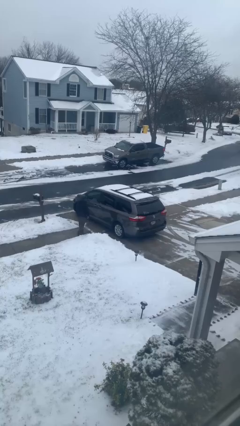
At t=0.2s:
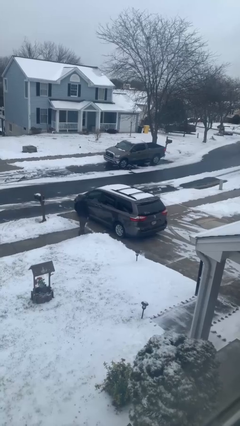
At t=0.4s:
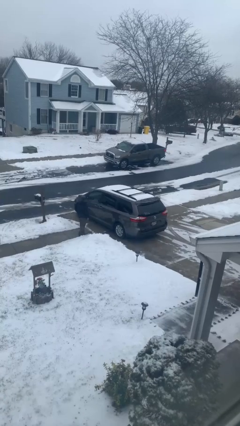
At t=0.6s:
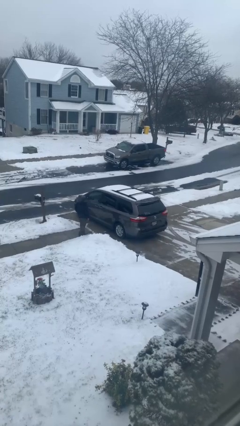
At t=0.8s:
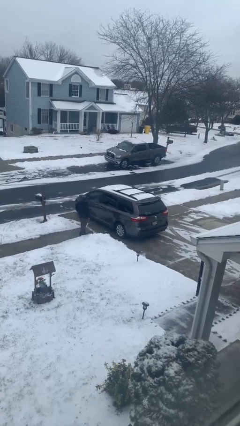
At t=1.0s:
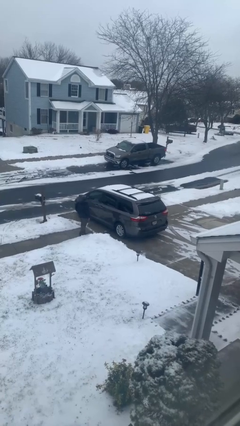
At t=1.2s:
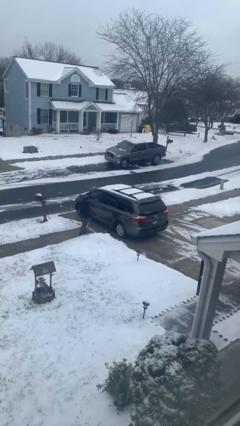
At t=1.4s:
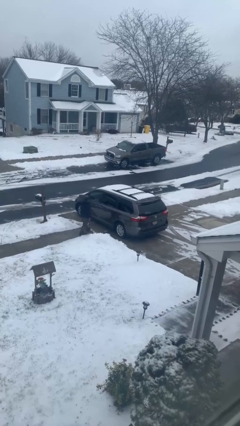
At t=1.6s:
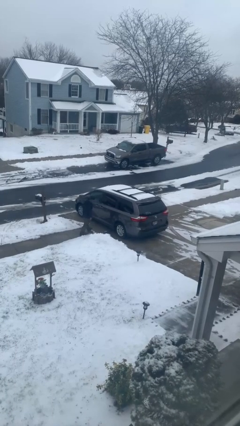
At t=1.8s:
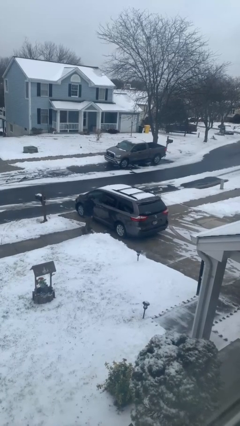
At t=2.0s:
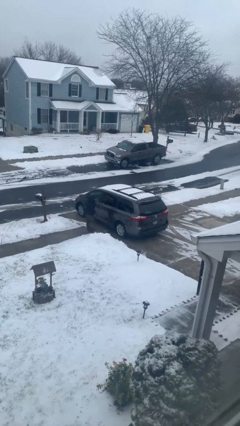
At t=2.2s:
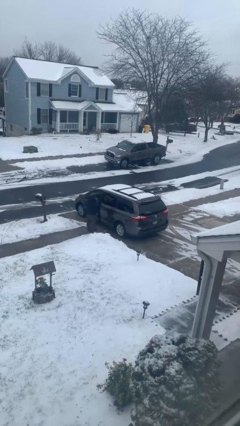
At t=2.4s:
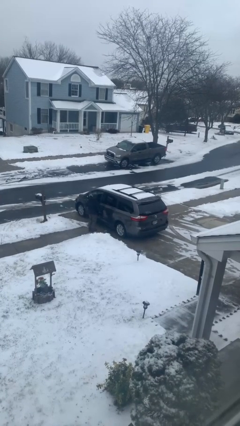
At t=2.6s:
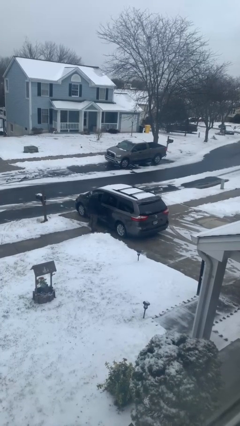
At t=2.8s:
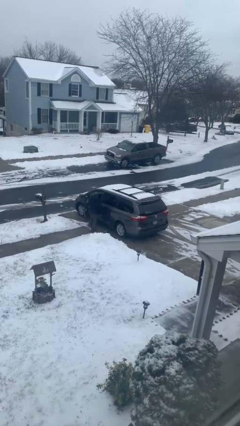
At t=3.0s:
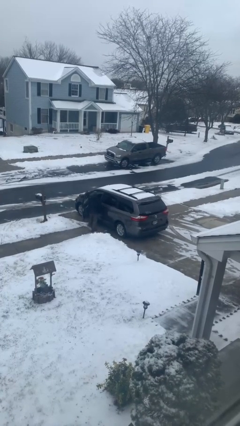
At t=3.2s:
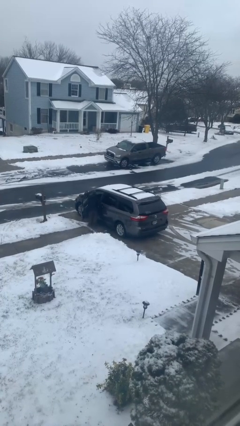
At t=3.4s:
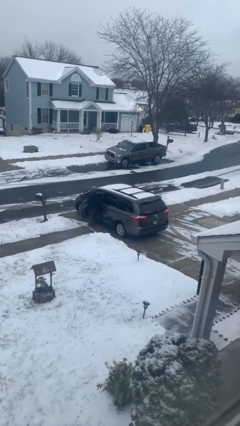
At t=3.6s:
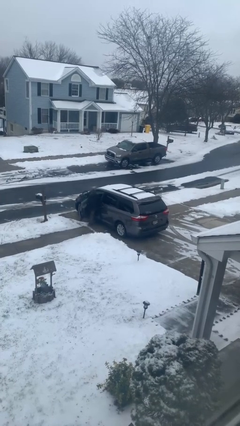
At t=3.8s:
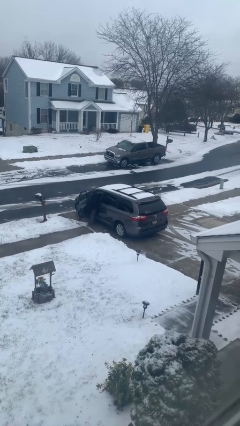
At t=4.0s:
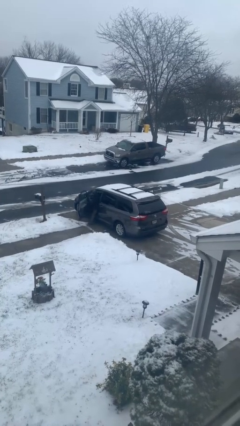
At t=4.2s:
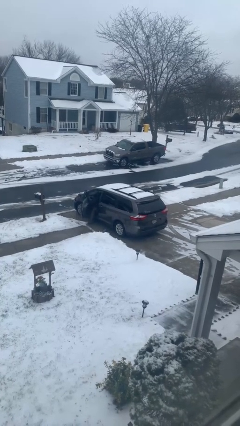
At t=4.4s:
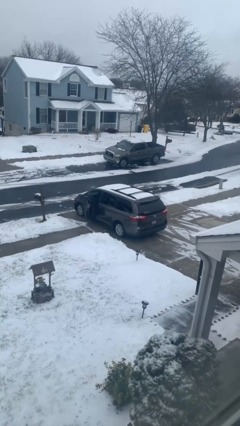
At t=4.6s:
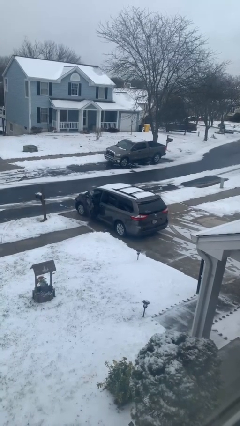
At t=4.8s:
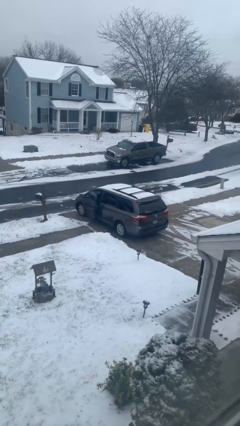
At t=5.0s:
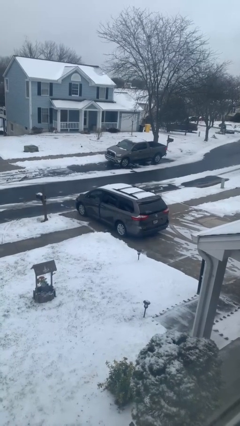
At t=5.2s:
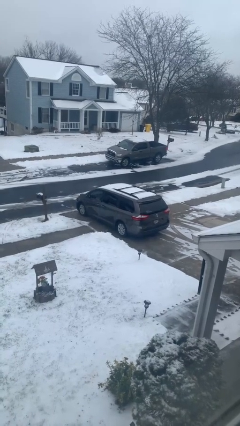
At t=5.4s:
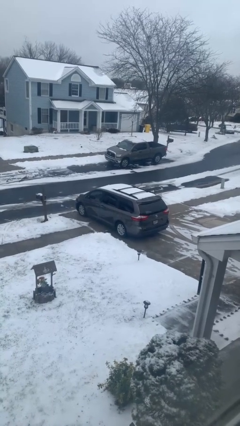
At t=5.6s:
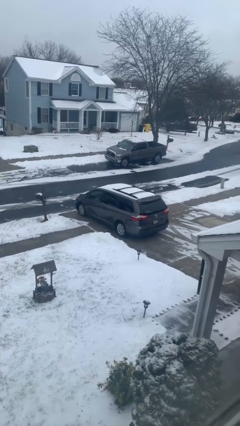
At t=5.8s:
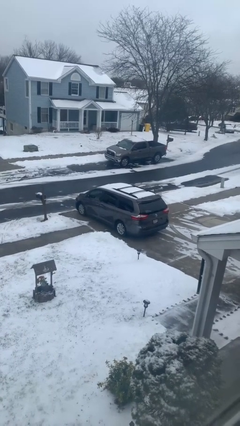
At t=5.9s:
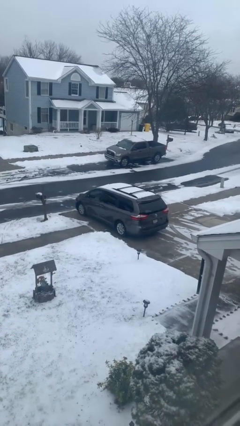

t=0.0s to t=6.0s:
car picks up person

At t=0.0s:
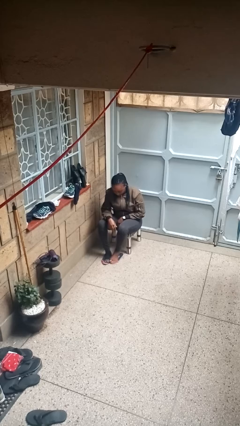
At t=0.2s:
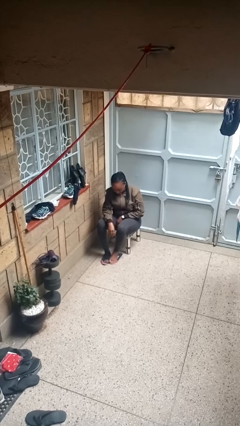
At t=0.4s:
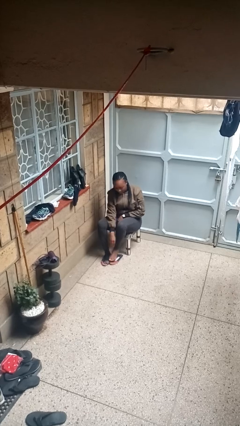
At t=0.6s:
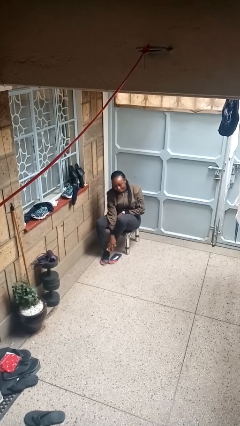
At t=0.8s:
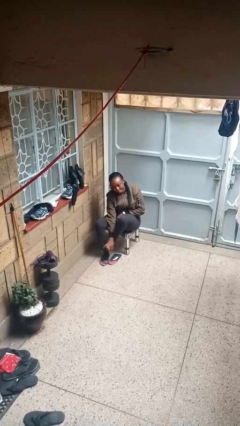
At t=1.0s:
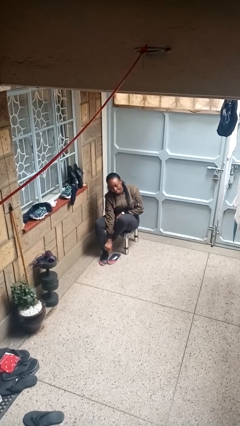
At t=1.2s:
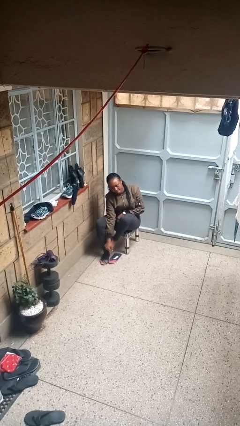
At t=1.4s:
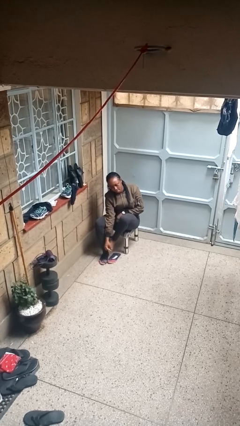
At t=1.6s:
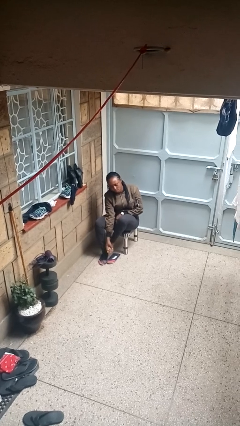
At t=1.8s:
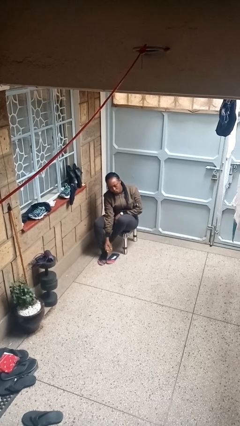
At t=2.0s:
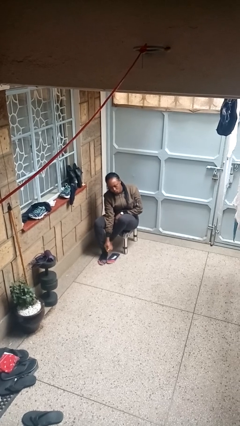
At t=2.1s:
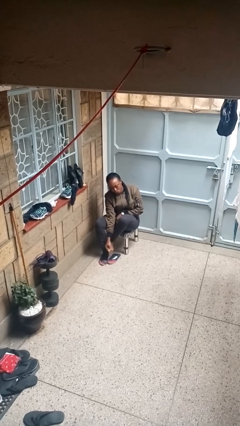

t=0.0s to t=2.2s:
person rubs foot

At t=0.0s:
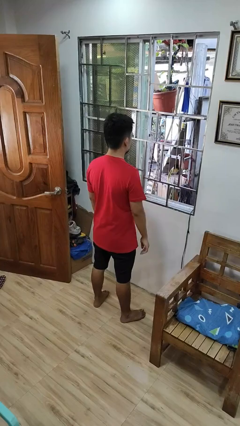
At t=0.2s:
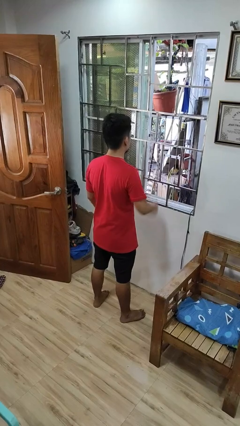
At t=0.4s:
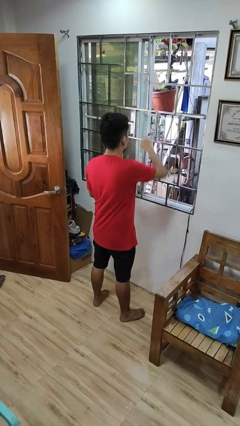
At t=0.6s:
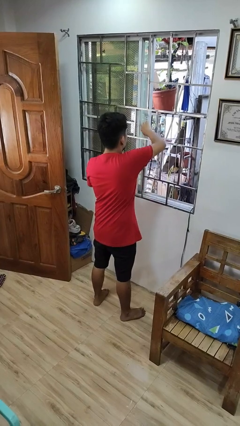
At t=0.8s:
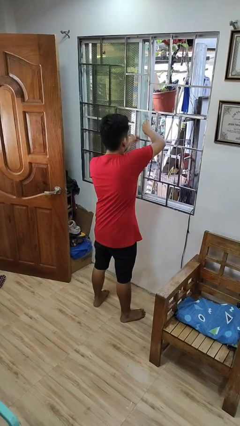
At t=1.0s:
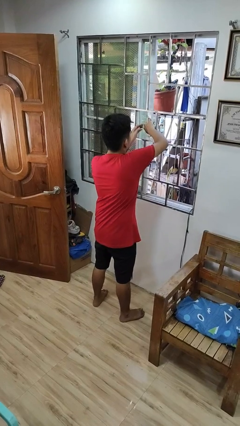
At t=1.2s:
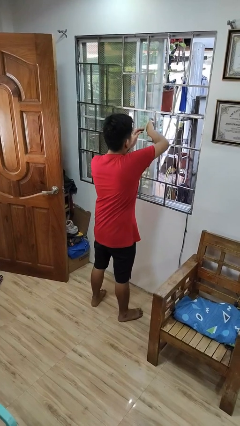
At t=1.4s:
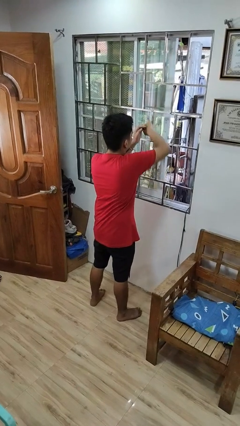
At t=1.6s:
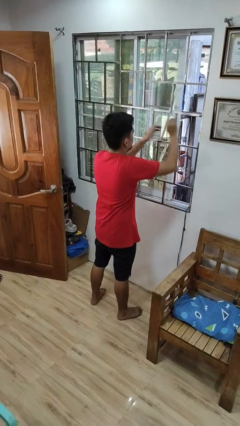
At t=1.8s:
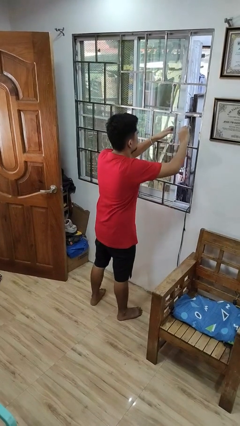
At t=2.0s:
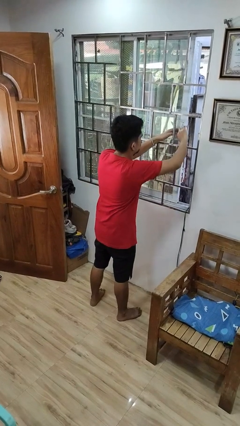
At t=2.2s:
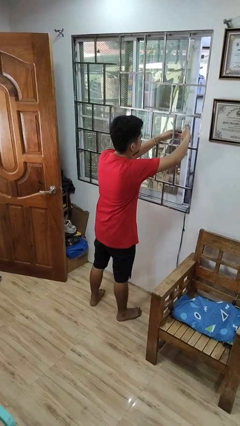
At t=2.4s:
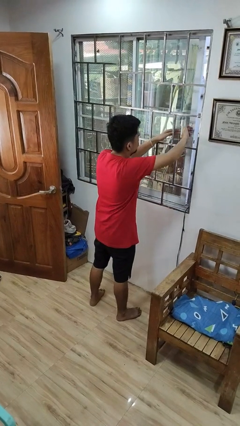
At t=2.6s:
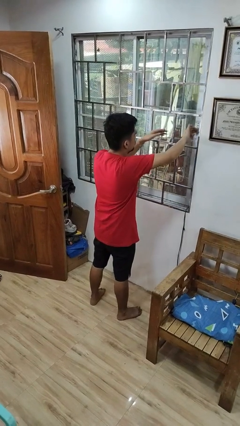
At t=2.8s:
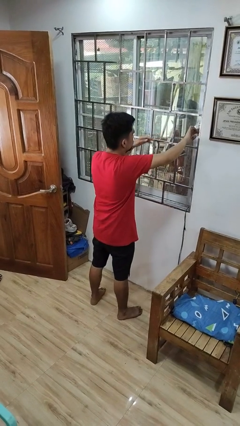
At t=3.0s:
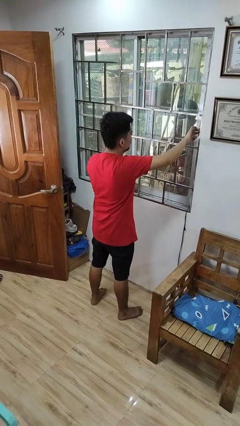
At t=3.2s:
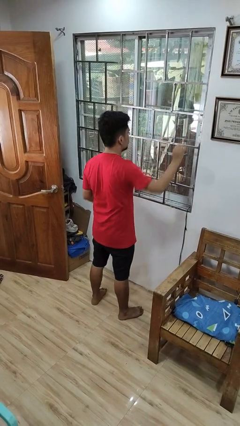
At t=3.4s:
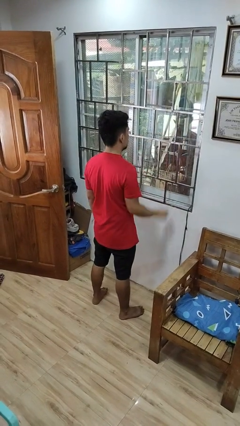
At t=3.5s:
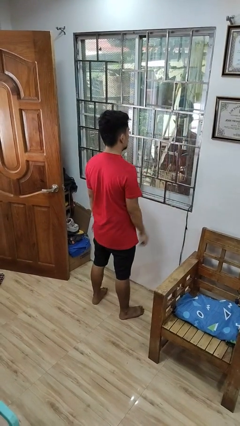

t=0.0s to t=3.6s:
person closes home window

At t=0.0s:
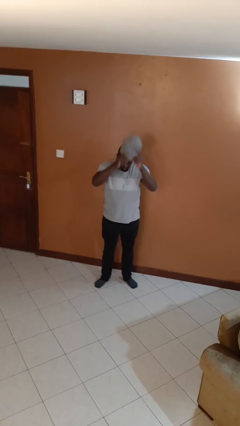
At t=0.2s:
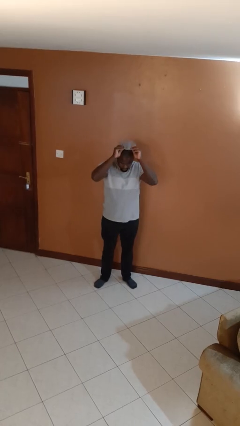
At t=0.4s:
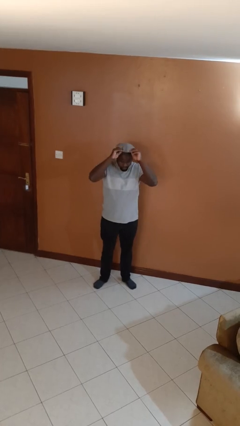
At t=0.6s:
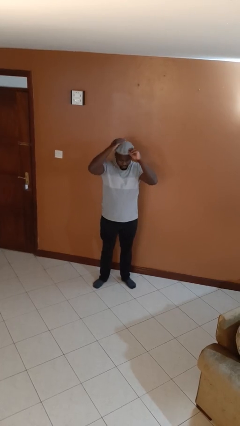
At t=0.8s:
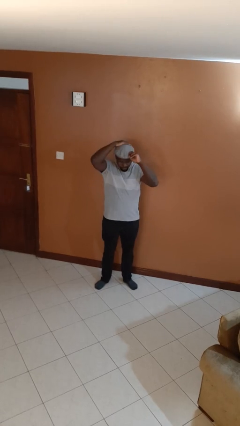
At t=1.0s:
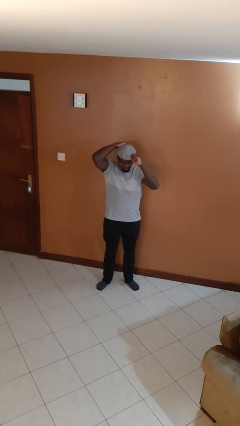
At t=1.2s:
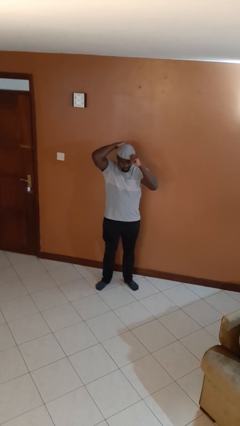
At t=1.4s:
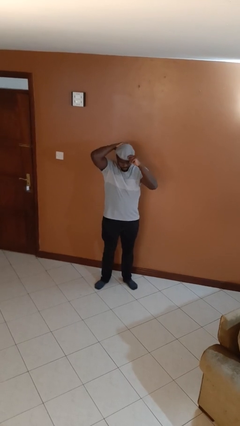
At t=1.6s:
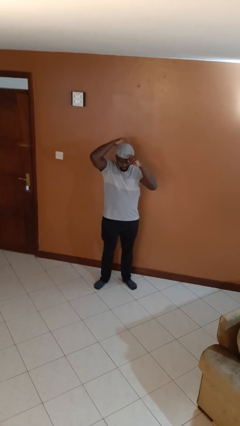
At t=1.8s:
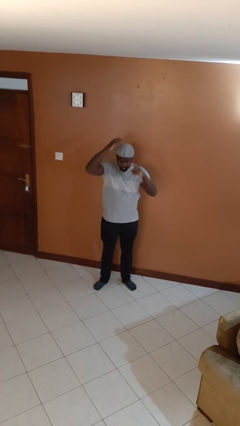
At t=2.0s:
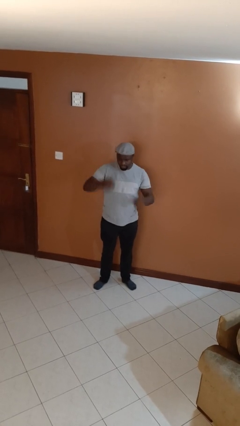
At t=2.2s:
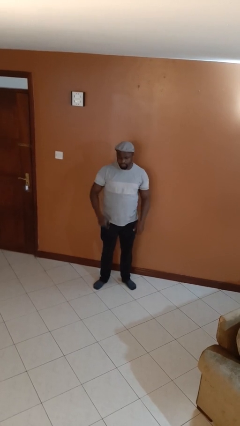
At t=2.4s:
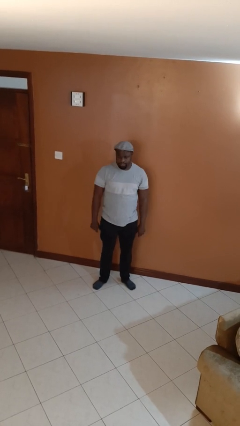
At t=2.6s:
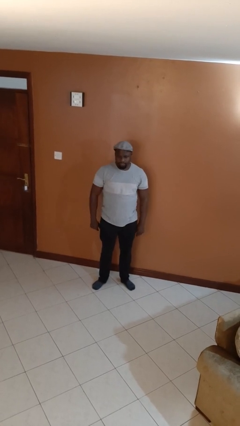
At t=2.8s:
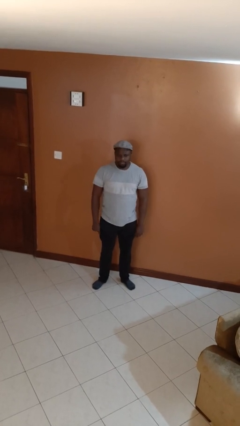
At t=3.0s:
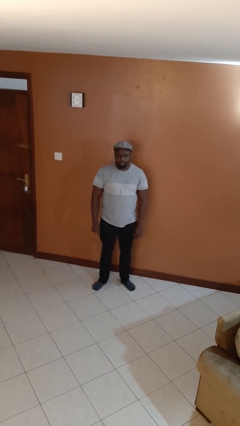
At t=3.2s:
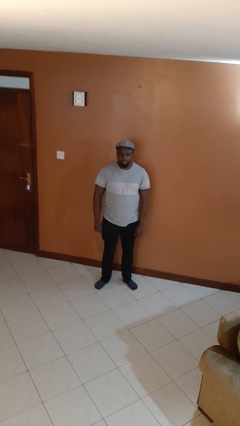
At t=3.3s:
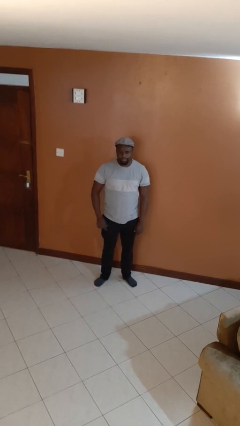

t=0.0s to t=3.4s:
person puts on hat

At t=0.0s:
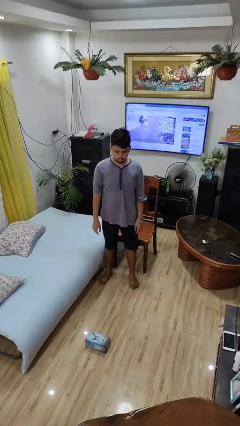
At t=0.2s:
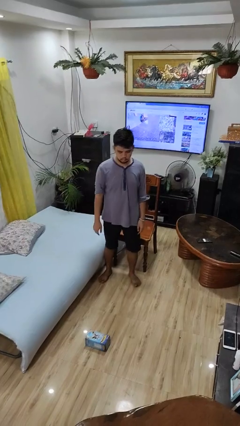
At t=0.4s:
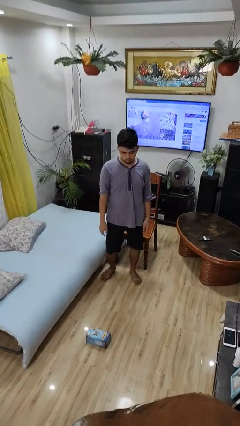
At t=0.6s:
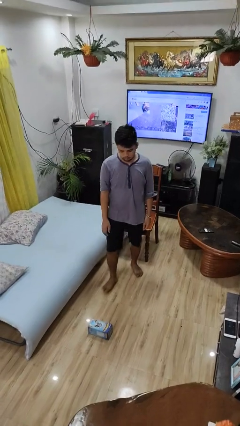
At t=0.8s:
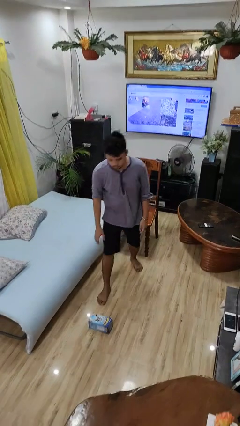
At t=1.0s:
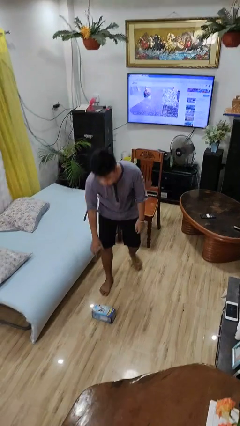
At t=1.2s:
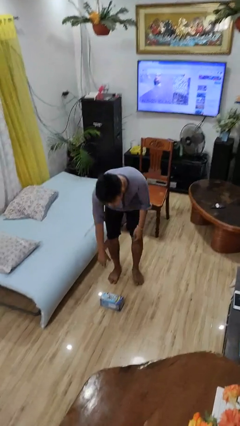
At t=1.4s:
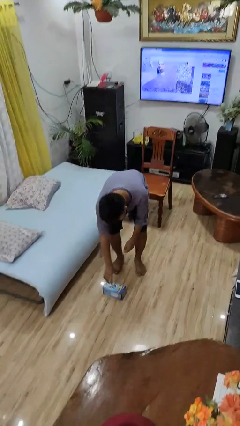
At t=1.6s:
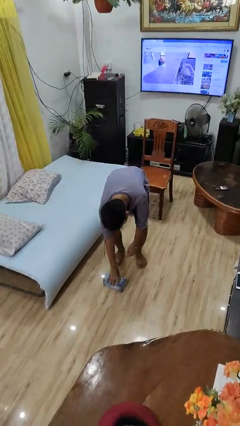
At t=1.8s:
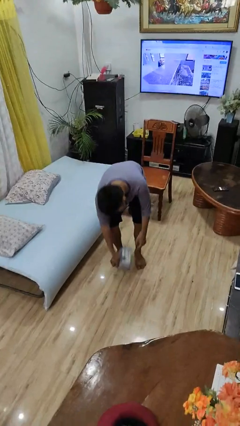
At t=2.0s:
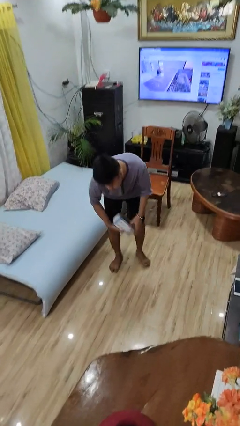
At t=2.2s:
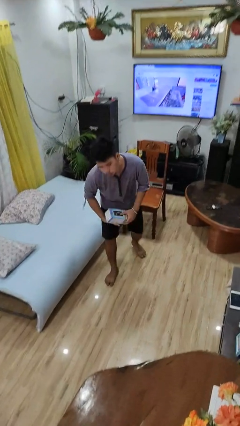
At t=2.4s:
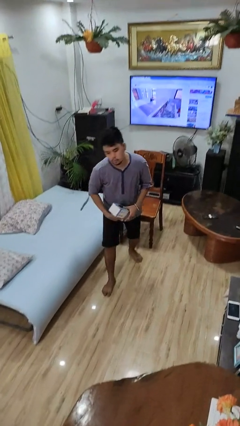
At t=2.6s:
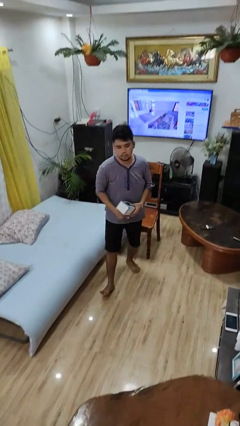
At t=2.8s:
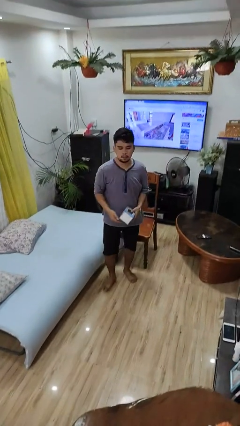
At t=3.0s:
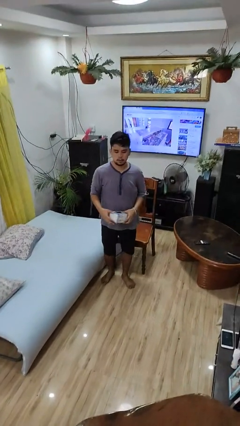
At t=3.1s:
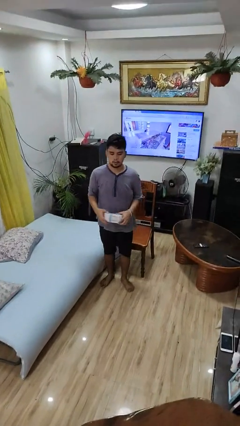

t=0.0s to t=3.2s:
person picks up object from floor
